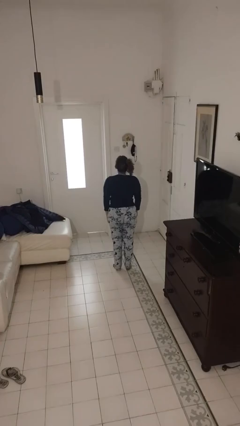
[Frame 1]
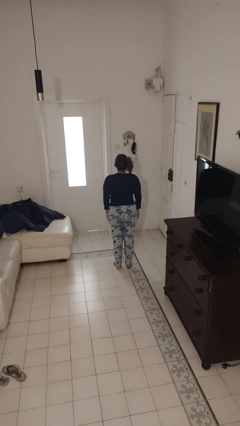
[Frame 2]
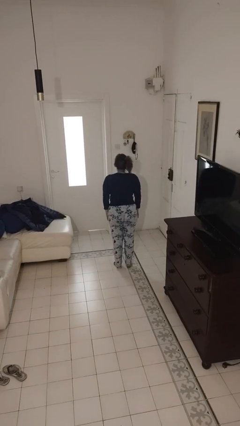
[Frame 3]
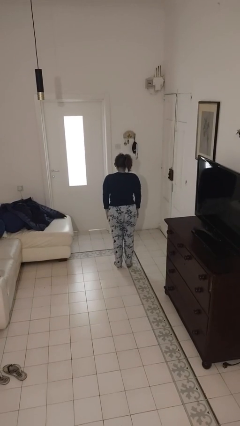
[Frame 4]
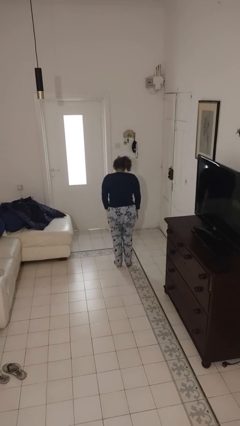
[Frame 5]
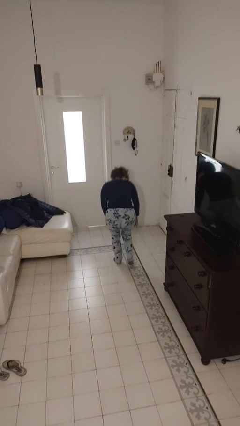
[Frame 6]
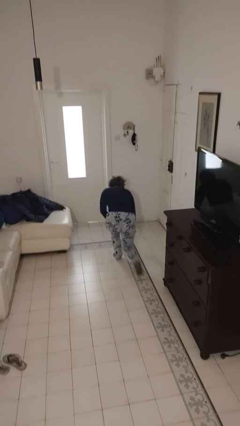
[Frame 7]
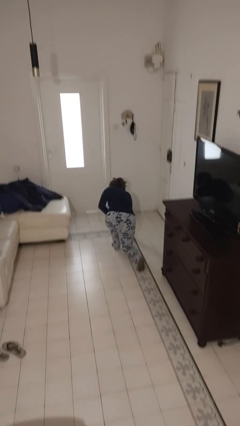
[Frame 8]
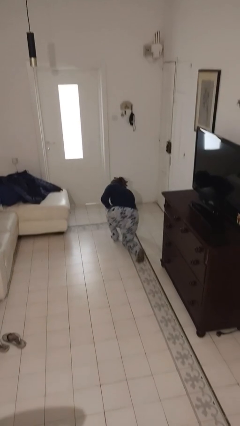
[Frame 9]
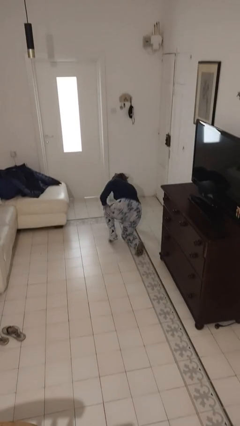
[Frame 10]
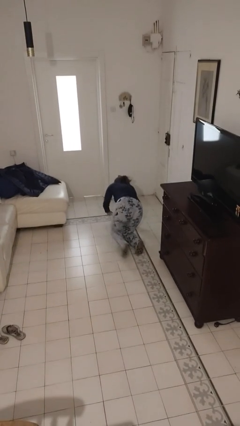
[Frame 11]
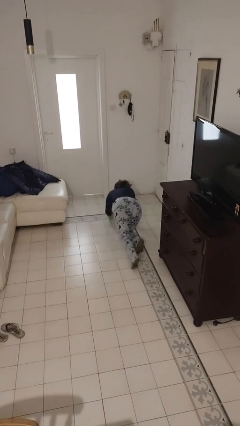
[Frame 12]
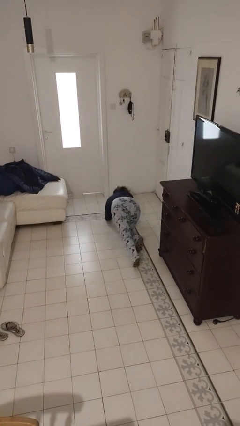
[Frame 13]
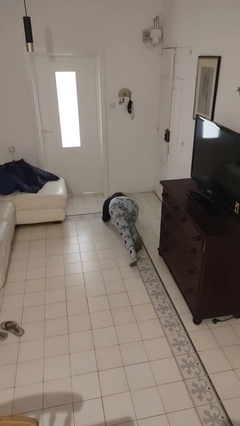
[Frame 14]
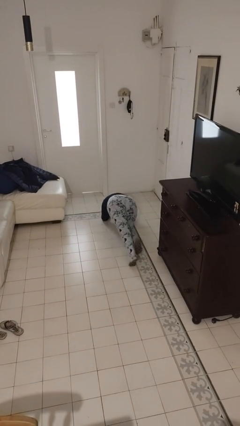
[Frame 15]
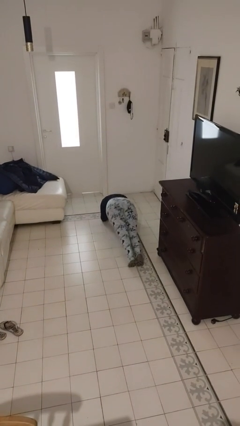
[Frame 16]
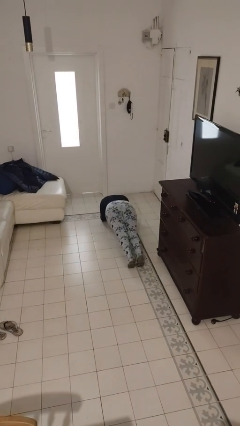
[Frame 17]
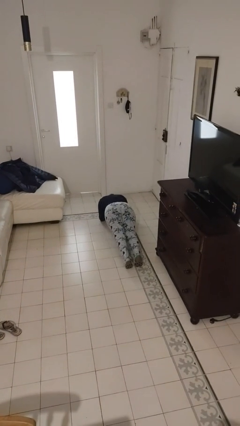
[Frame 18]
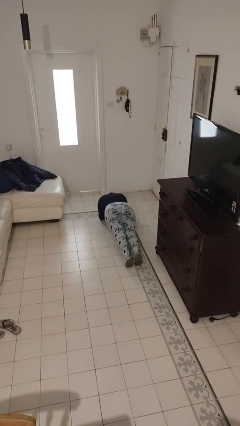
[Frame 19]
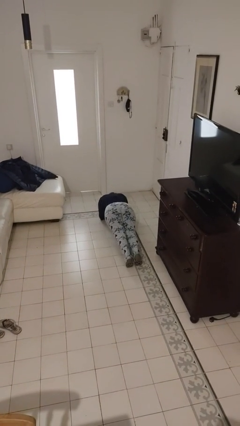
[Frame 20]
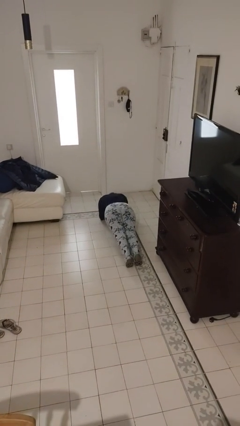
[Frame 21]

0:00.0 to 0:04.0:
person exercises with plank

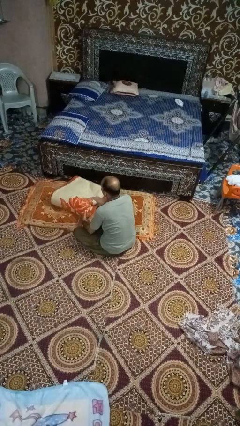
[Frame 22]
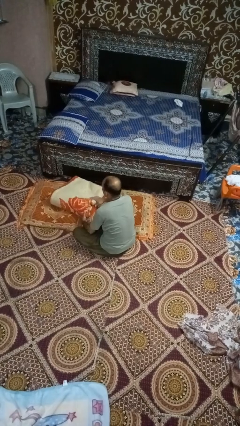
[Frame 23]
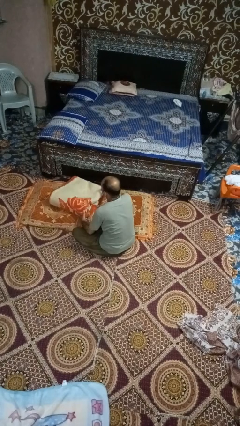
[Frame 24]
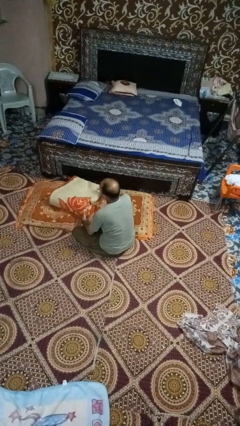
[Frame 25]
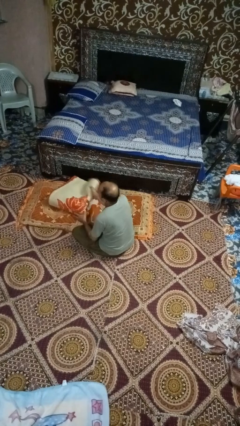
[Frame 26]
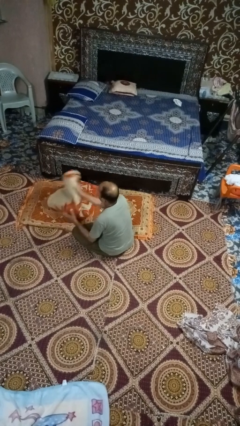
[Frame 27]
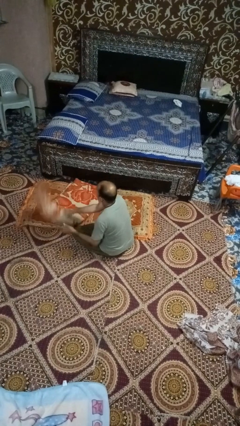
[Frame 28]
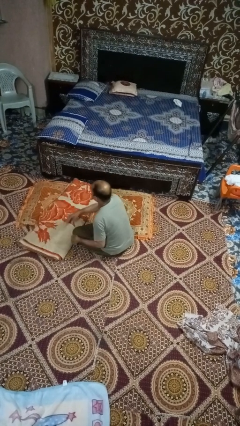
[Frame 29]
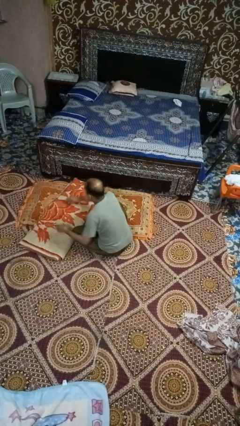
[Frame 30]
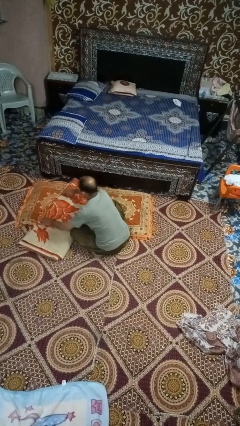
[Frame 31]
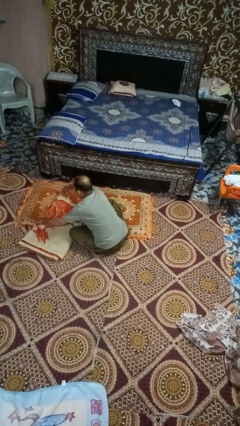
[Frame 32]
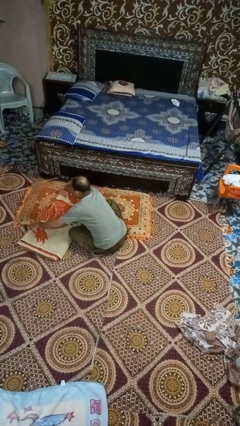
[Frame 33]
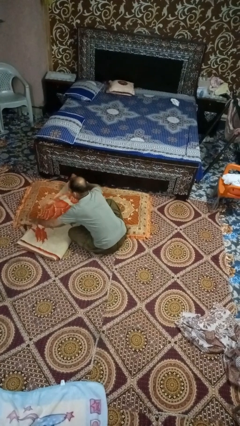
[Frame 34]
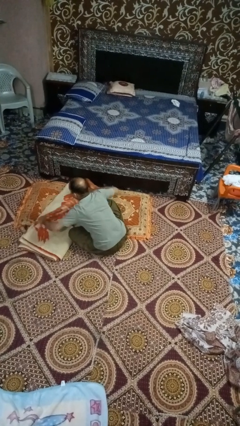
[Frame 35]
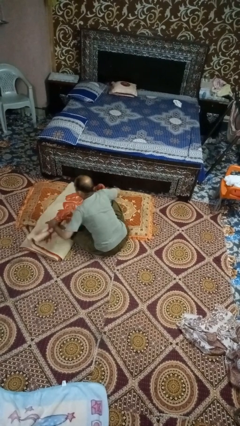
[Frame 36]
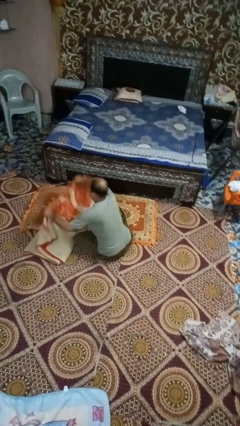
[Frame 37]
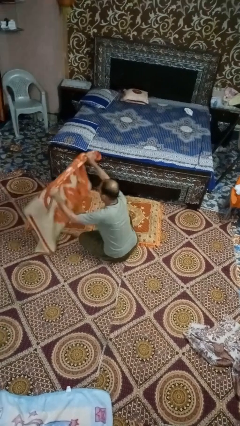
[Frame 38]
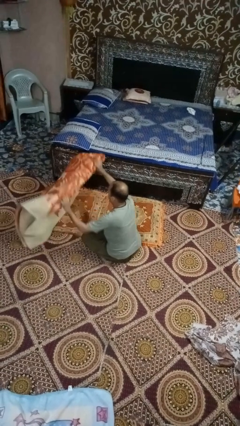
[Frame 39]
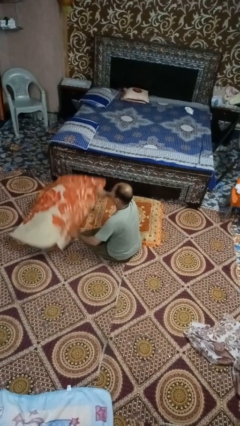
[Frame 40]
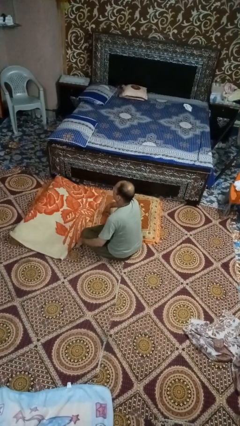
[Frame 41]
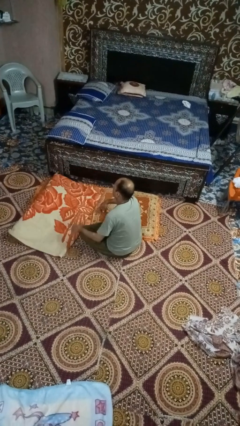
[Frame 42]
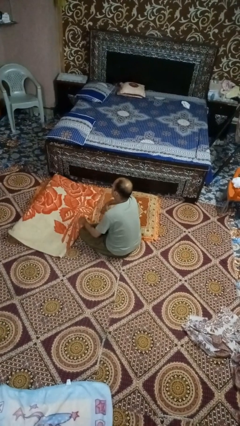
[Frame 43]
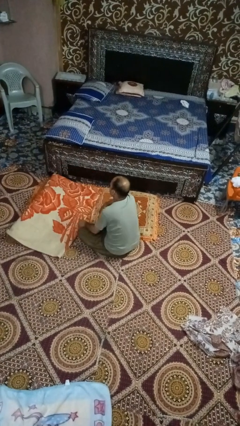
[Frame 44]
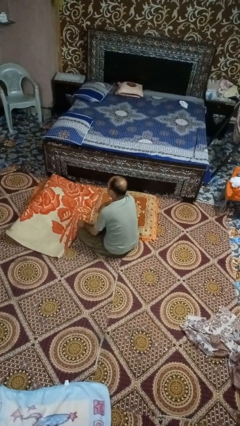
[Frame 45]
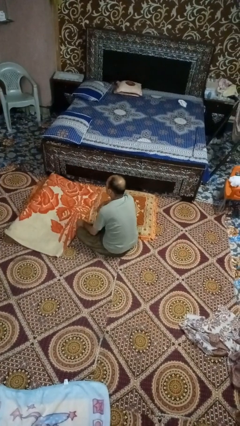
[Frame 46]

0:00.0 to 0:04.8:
person unfolds blanket

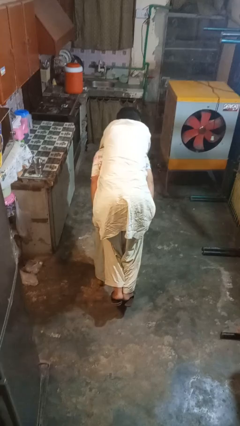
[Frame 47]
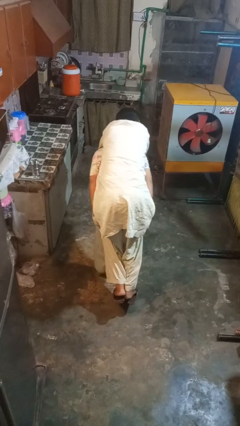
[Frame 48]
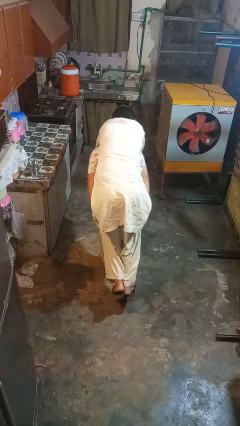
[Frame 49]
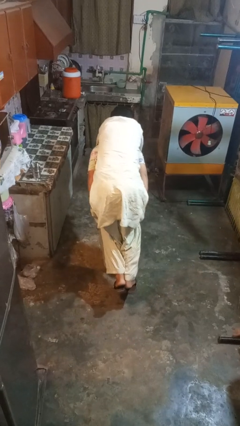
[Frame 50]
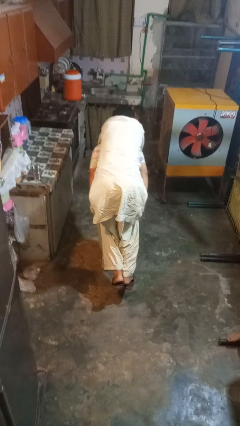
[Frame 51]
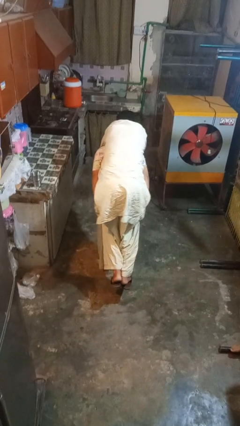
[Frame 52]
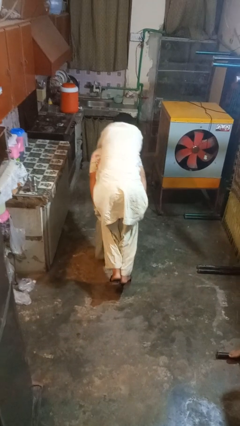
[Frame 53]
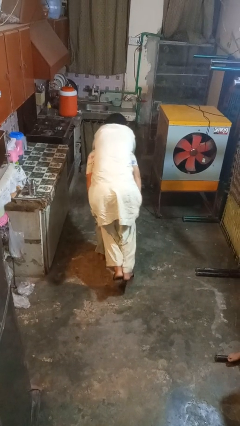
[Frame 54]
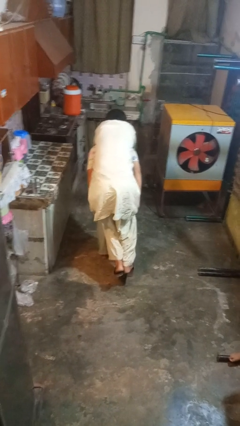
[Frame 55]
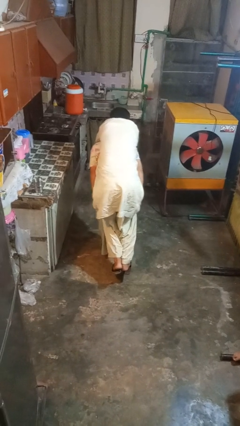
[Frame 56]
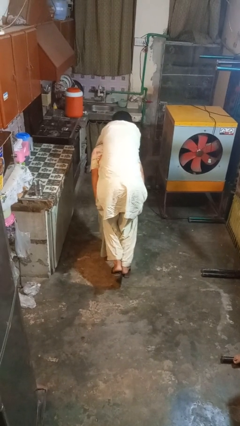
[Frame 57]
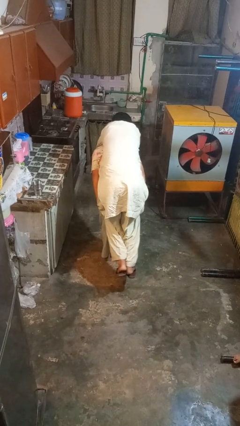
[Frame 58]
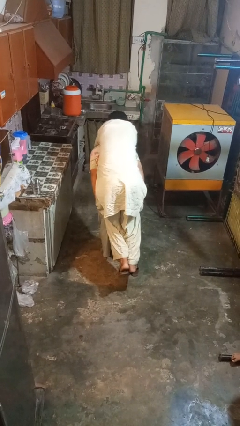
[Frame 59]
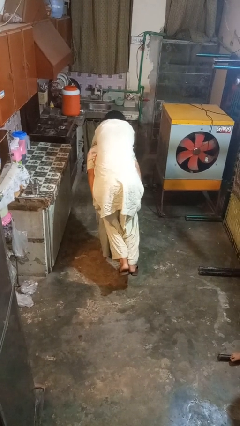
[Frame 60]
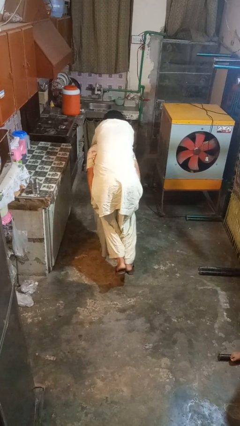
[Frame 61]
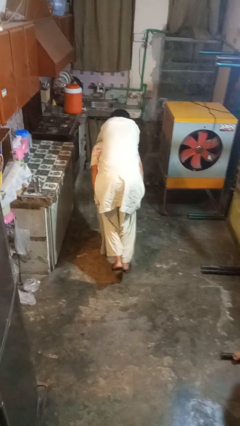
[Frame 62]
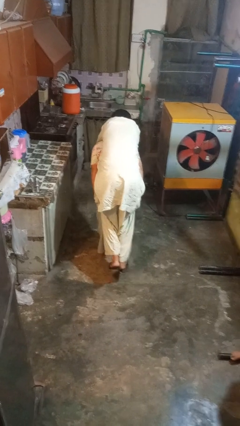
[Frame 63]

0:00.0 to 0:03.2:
person carries person on back

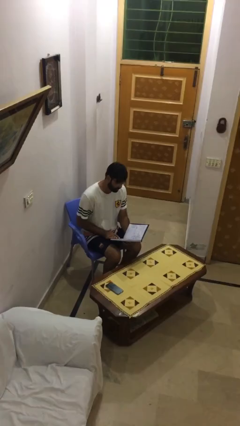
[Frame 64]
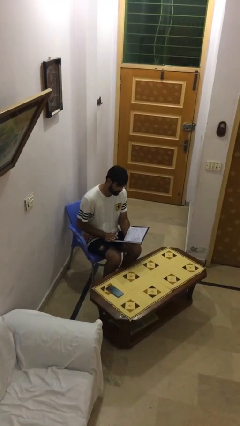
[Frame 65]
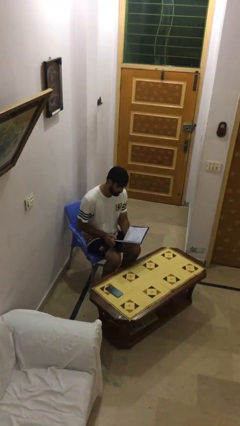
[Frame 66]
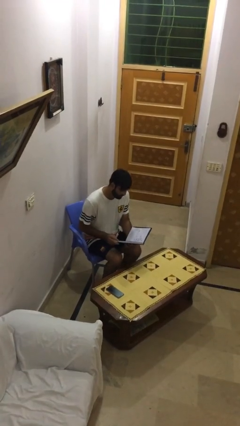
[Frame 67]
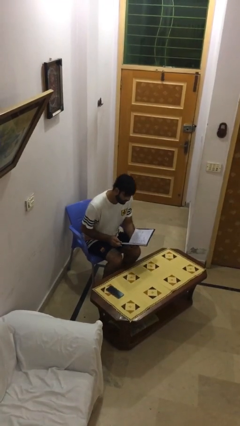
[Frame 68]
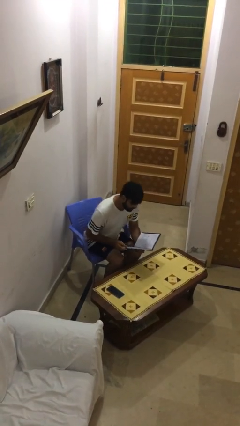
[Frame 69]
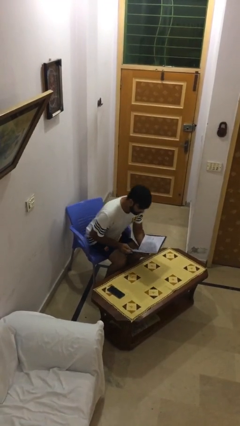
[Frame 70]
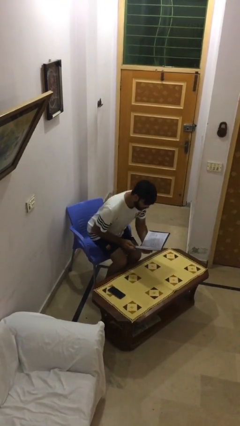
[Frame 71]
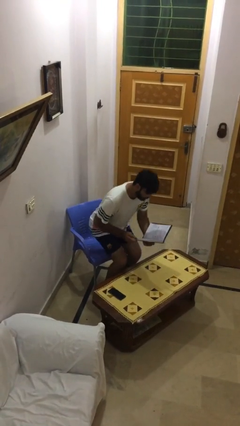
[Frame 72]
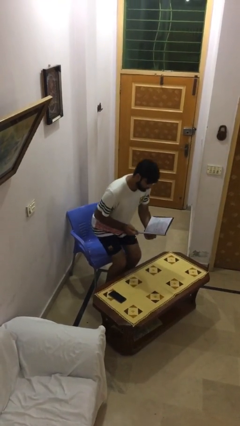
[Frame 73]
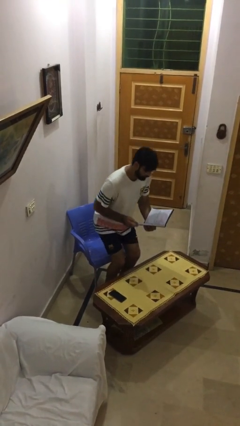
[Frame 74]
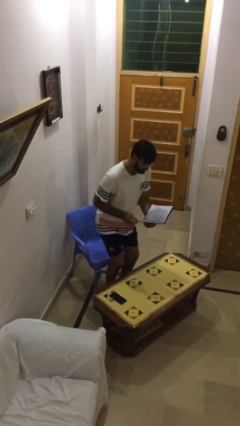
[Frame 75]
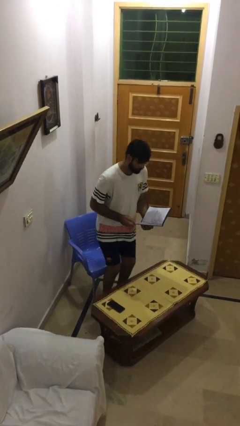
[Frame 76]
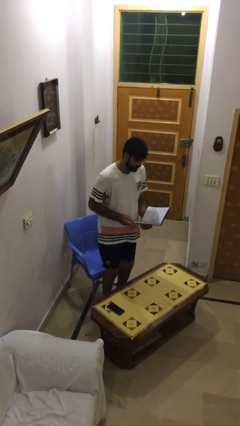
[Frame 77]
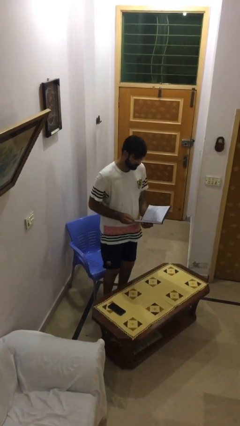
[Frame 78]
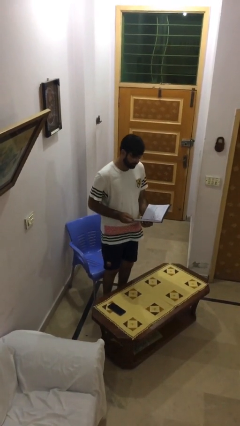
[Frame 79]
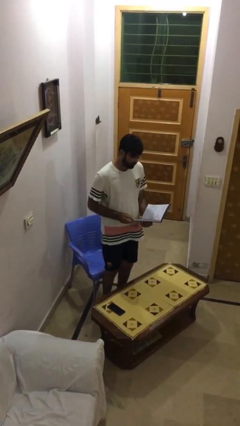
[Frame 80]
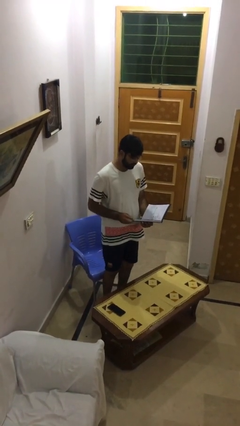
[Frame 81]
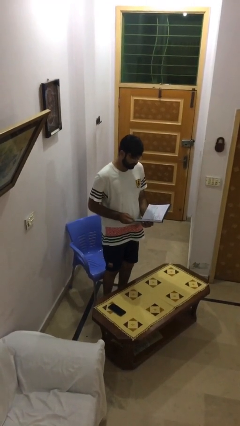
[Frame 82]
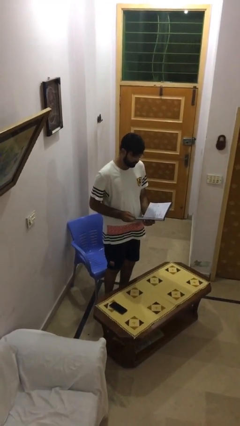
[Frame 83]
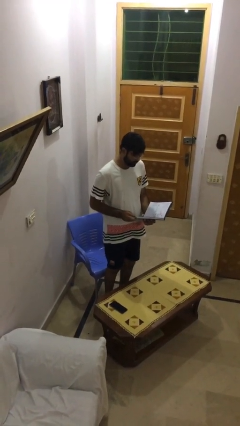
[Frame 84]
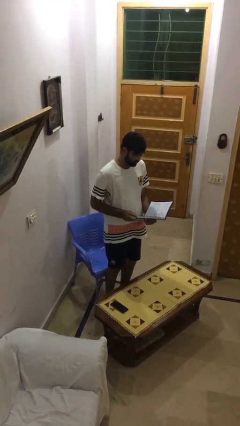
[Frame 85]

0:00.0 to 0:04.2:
person stands up

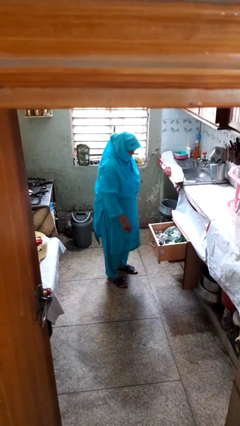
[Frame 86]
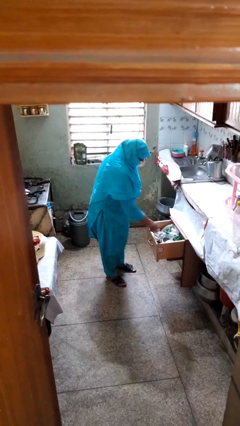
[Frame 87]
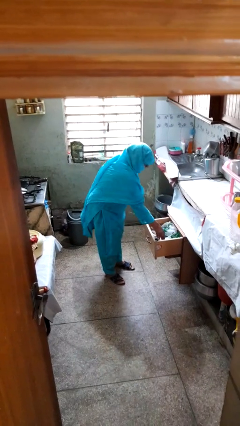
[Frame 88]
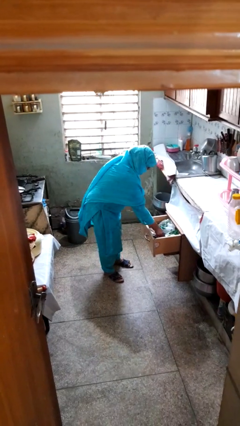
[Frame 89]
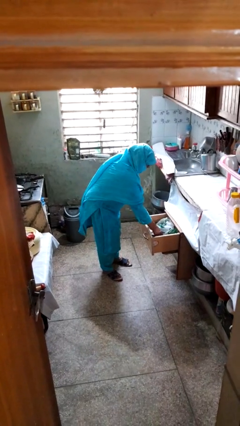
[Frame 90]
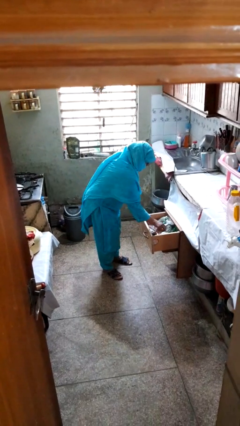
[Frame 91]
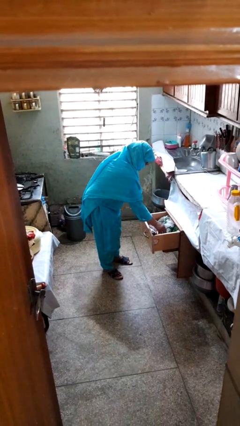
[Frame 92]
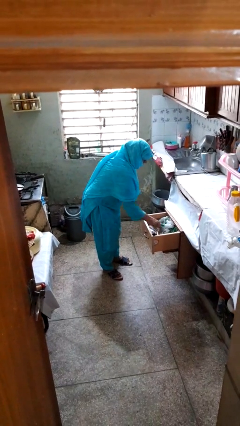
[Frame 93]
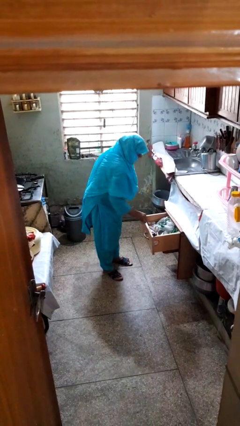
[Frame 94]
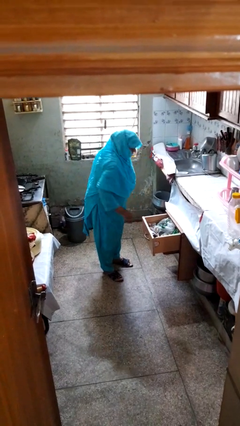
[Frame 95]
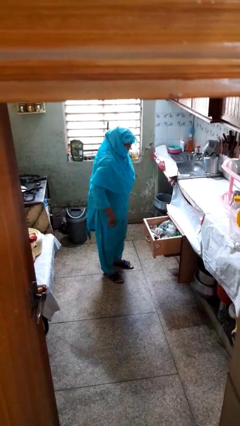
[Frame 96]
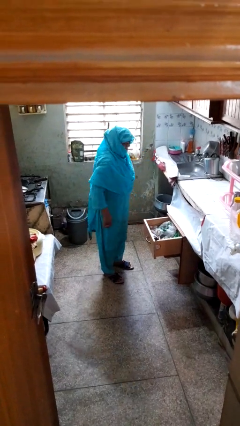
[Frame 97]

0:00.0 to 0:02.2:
person searches in kitchen drawer
